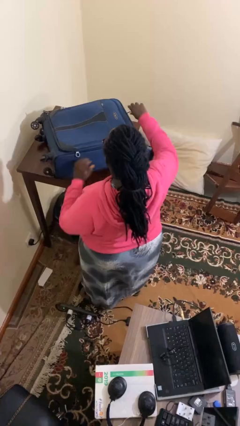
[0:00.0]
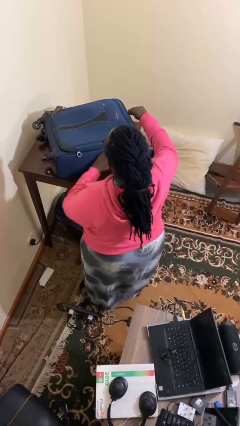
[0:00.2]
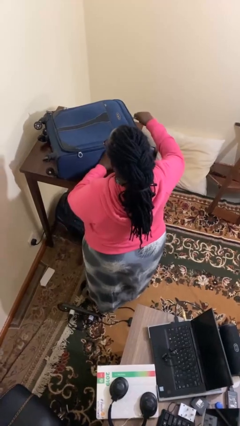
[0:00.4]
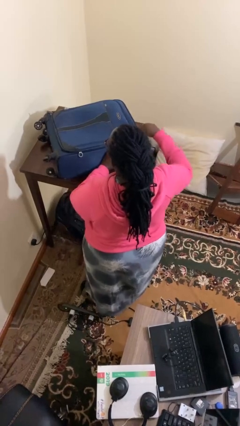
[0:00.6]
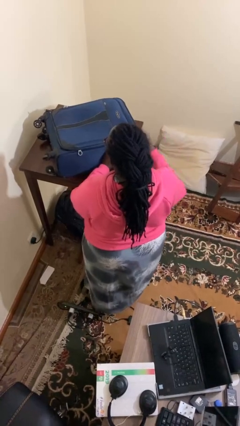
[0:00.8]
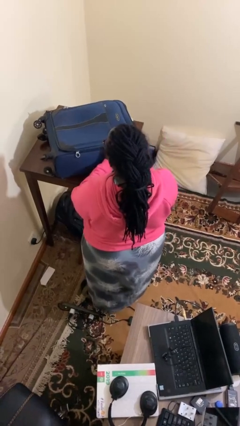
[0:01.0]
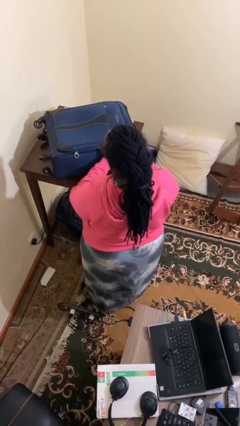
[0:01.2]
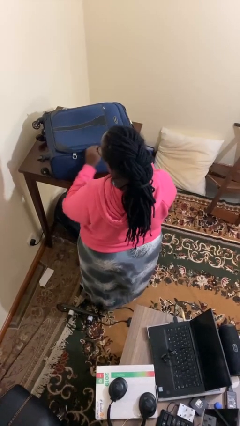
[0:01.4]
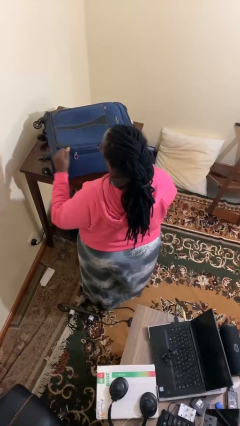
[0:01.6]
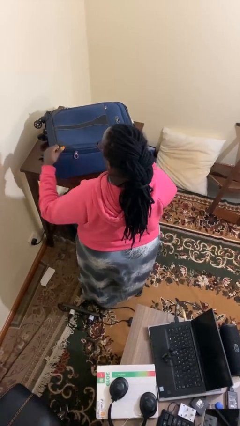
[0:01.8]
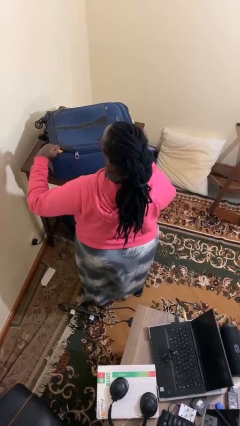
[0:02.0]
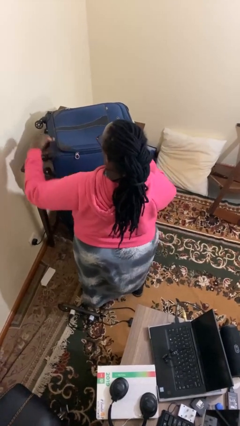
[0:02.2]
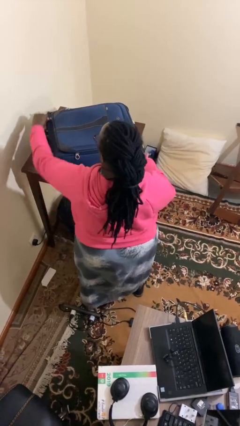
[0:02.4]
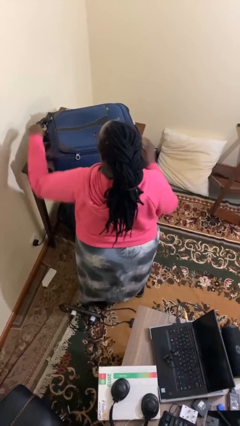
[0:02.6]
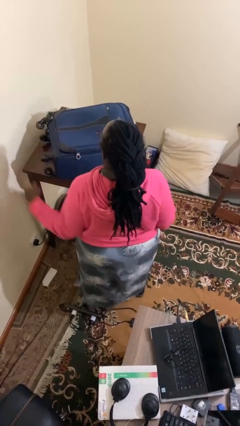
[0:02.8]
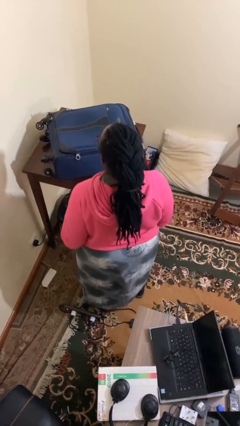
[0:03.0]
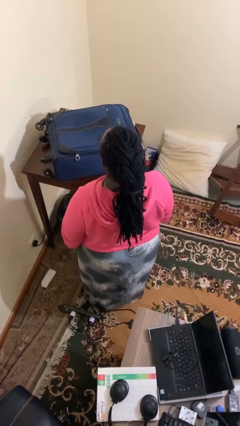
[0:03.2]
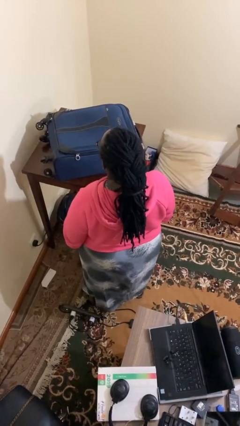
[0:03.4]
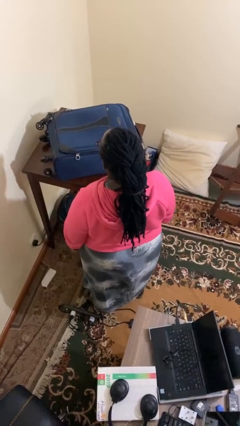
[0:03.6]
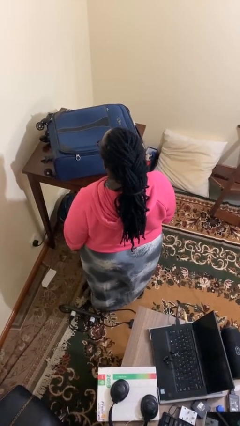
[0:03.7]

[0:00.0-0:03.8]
person puts object into kitchen drawer

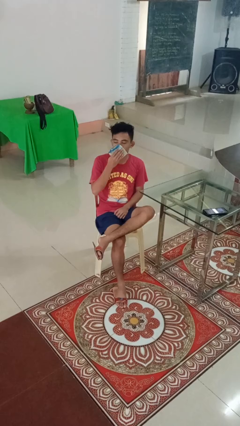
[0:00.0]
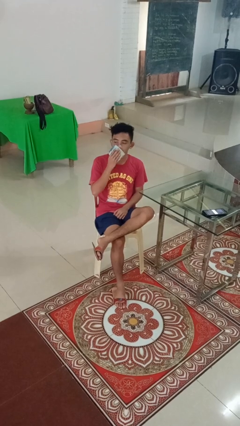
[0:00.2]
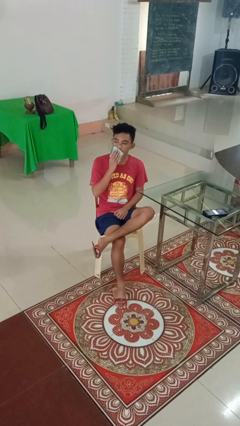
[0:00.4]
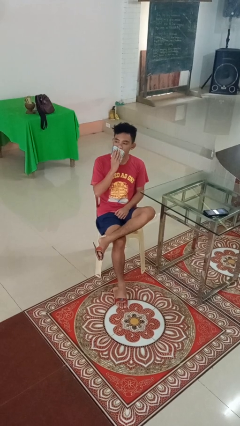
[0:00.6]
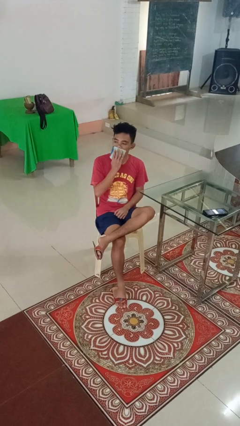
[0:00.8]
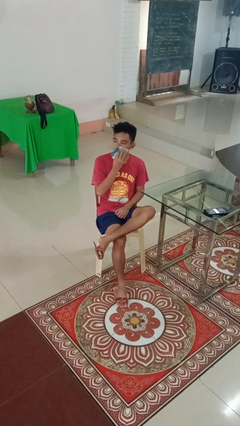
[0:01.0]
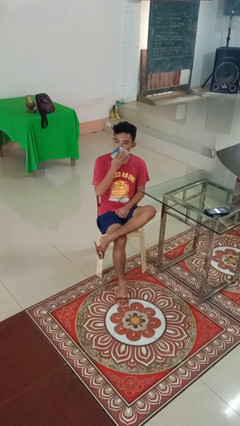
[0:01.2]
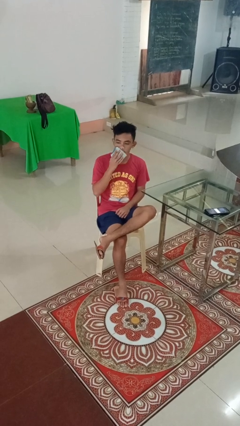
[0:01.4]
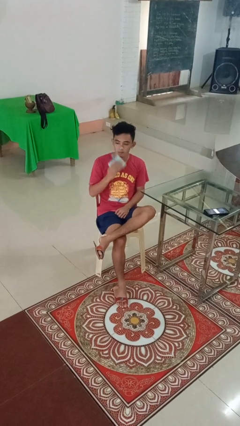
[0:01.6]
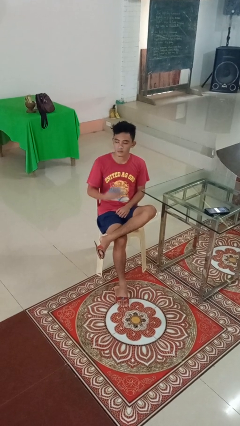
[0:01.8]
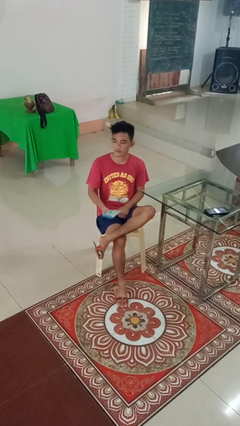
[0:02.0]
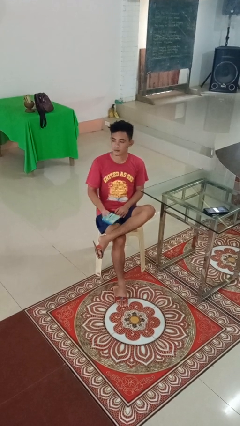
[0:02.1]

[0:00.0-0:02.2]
person wipes mouth with napkin

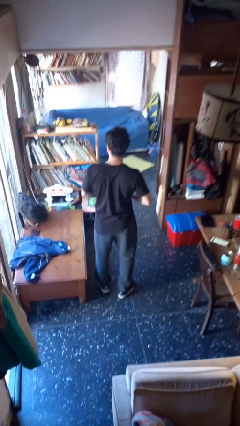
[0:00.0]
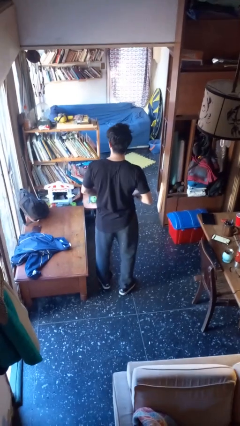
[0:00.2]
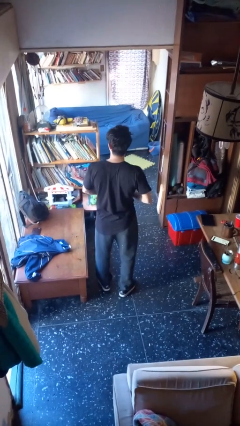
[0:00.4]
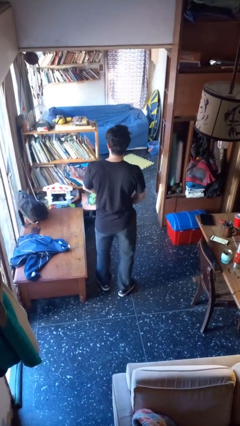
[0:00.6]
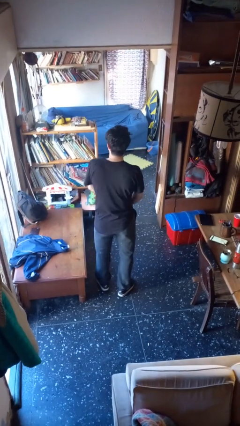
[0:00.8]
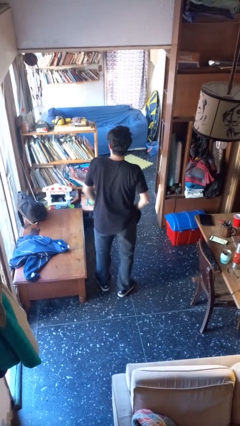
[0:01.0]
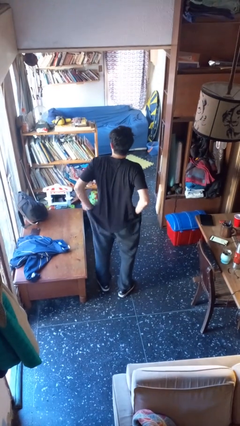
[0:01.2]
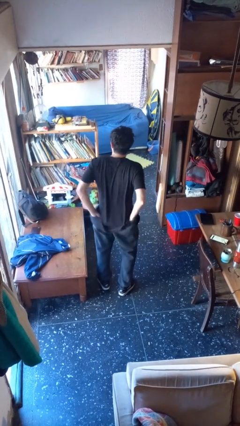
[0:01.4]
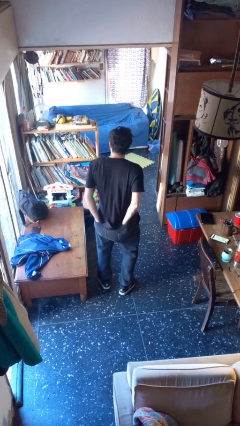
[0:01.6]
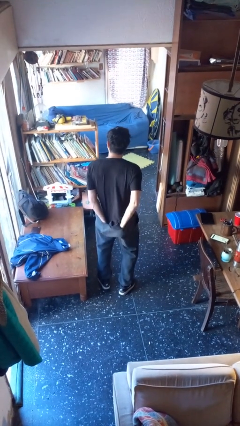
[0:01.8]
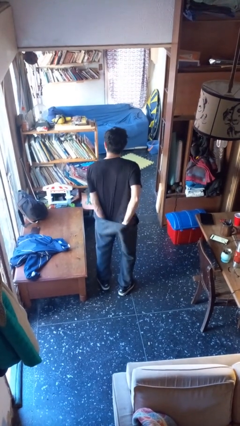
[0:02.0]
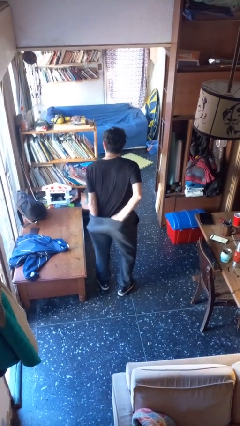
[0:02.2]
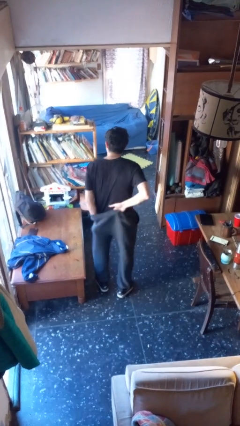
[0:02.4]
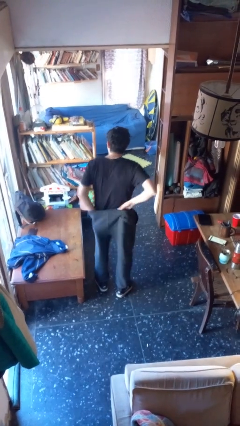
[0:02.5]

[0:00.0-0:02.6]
person tucks in shirt

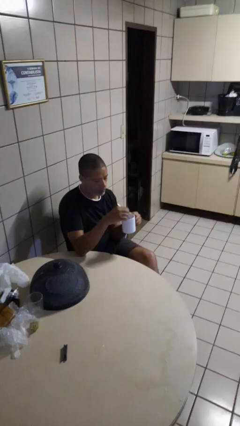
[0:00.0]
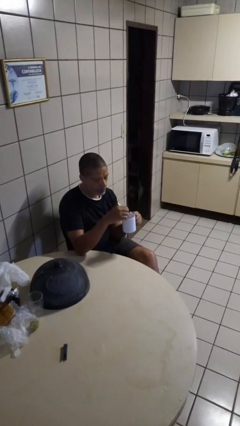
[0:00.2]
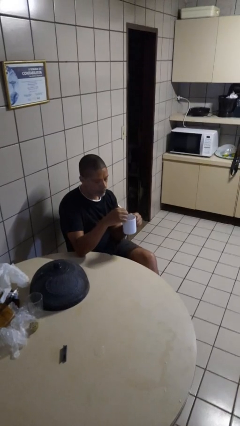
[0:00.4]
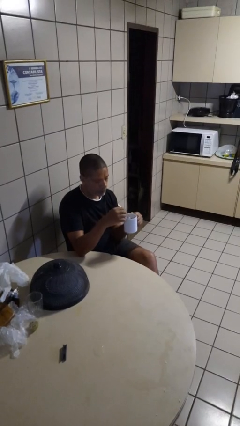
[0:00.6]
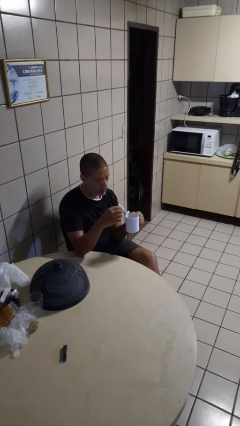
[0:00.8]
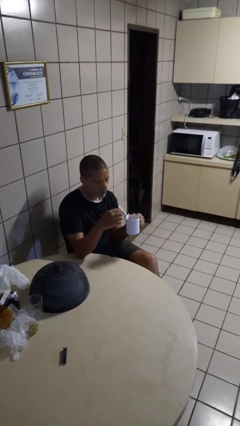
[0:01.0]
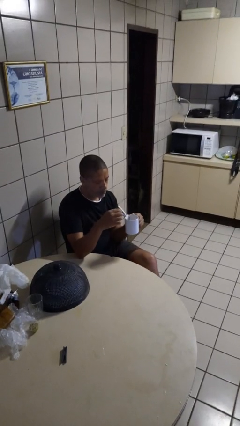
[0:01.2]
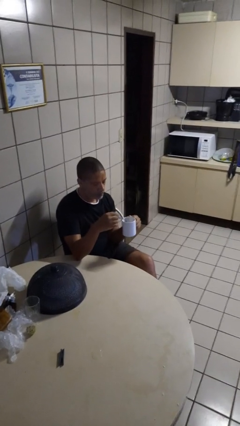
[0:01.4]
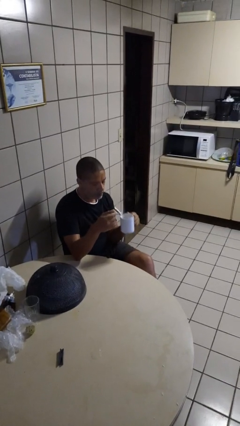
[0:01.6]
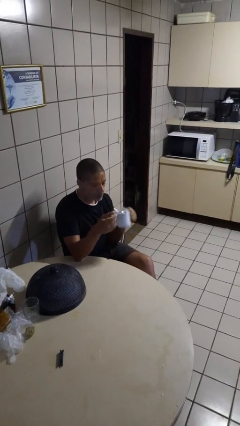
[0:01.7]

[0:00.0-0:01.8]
person stirs mug

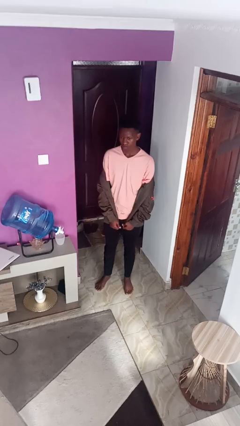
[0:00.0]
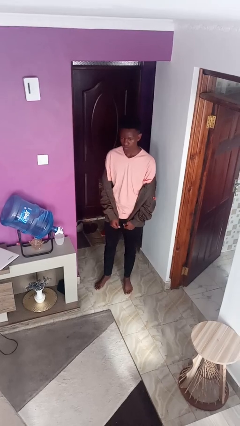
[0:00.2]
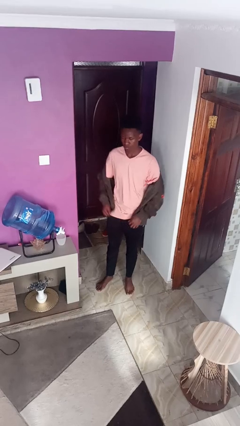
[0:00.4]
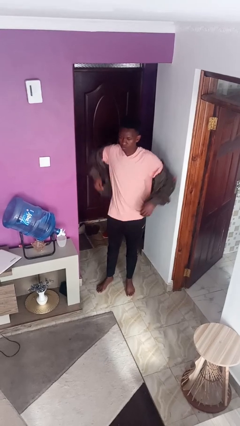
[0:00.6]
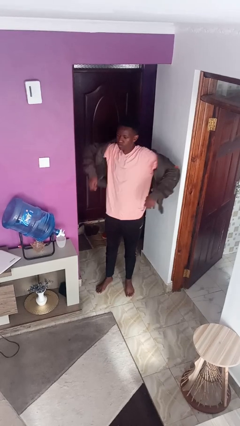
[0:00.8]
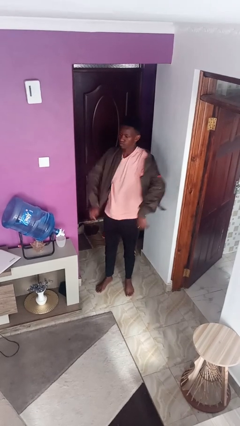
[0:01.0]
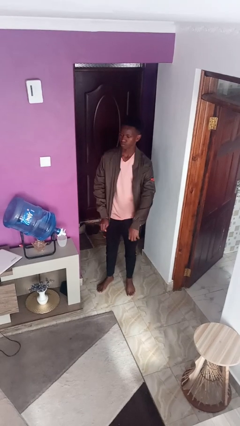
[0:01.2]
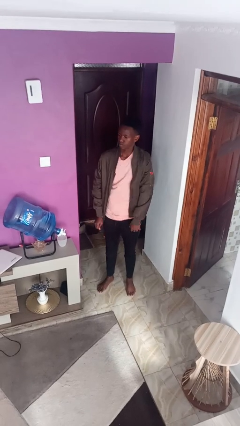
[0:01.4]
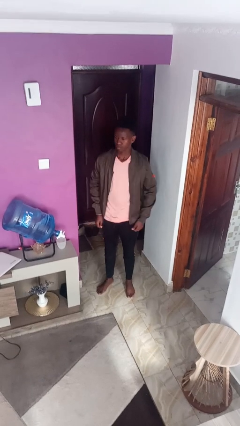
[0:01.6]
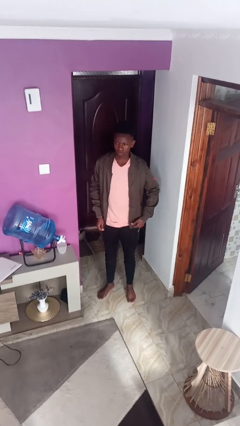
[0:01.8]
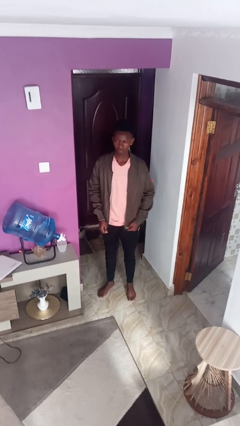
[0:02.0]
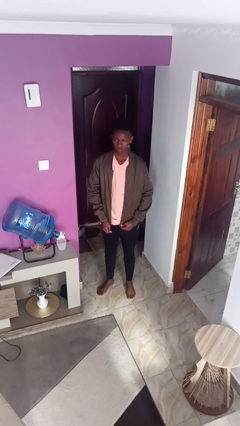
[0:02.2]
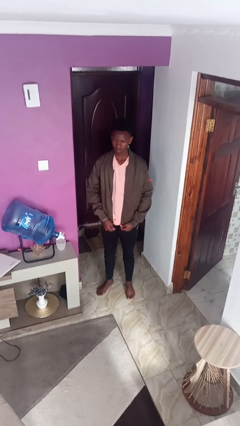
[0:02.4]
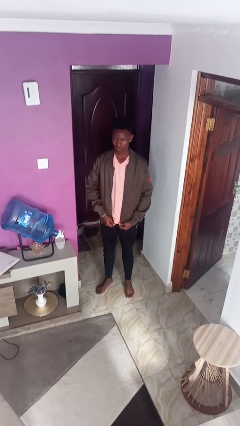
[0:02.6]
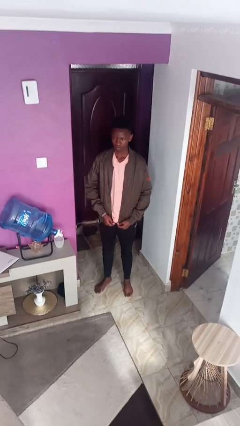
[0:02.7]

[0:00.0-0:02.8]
person puts on jacket

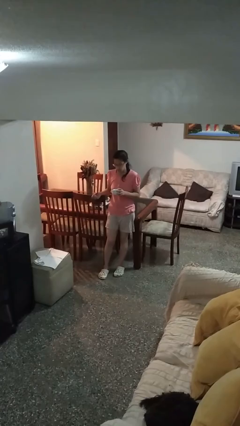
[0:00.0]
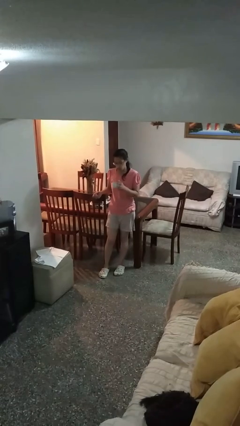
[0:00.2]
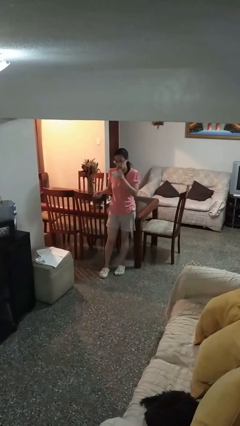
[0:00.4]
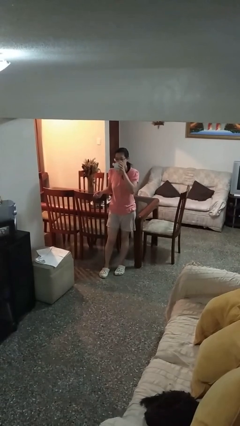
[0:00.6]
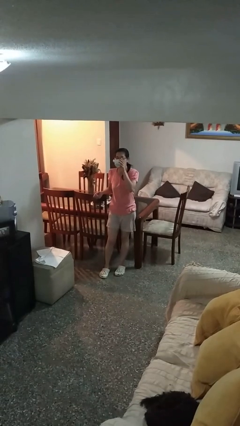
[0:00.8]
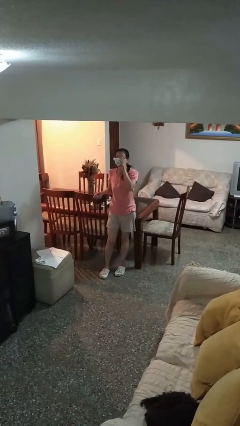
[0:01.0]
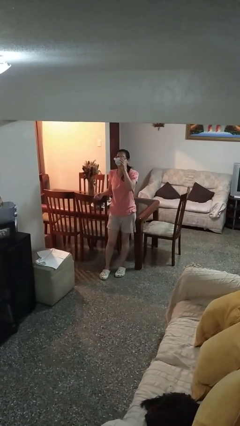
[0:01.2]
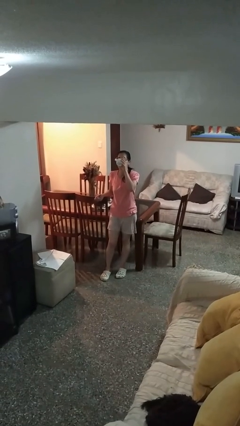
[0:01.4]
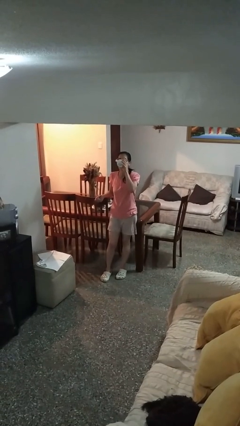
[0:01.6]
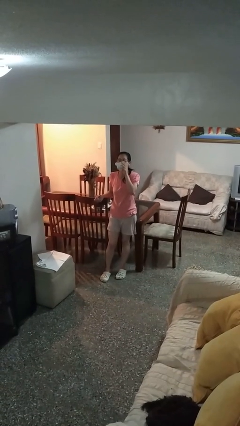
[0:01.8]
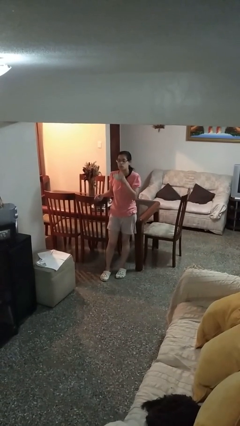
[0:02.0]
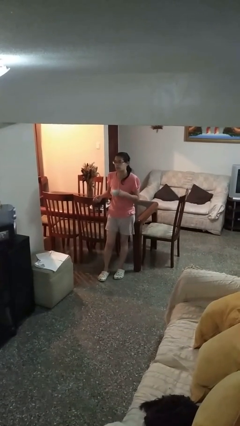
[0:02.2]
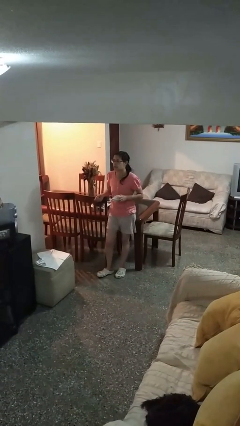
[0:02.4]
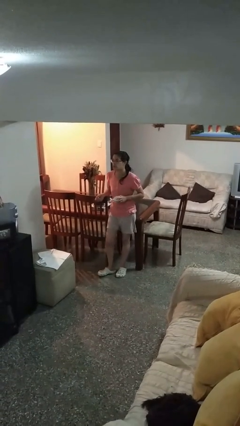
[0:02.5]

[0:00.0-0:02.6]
person drinks from mug

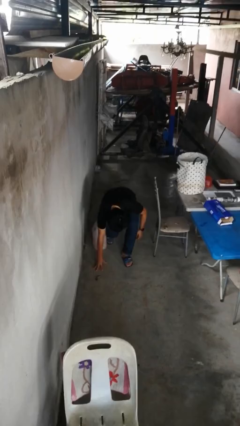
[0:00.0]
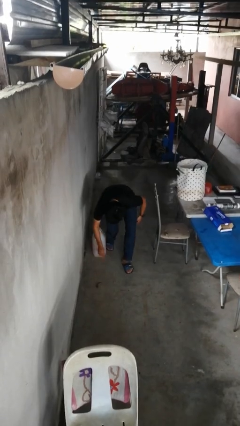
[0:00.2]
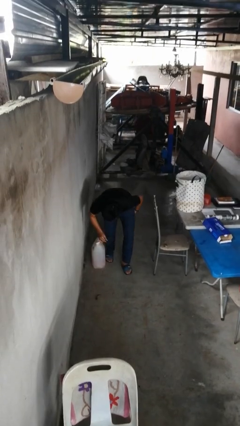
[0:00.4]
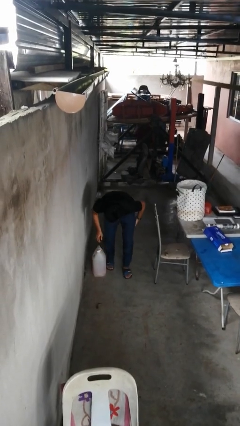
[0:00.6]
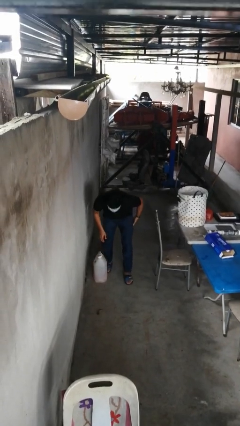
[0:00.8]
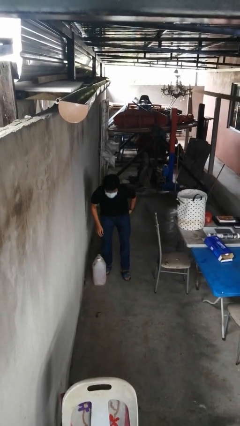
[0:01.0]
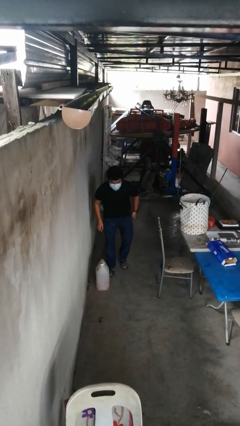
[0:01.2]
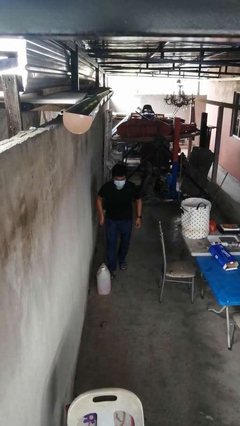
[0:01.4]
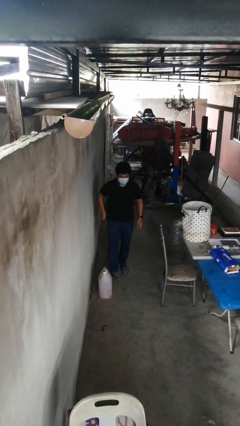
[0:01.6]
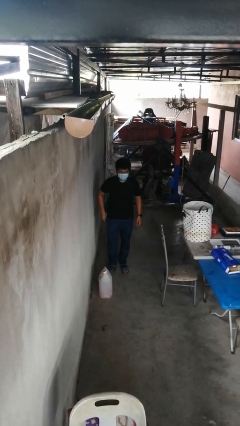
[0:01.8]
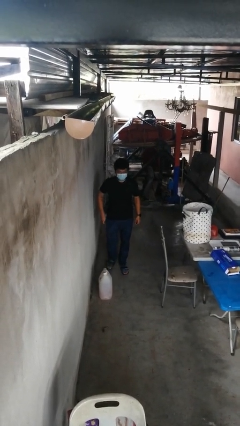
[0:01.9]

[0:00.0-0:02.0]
person stands up from floor
